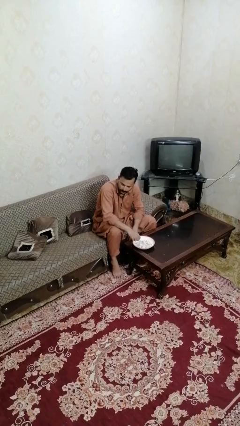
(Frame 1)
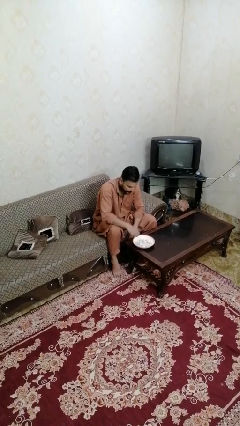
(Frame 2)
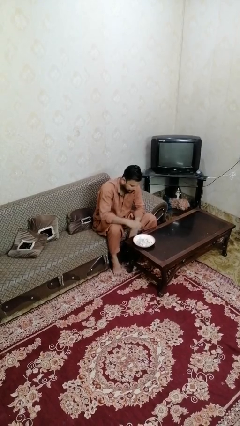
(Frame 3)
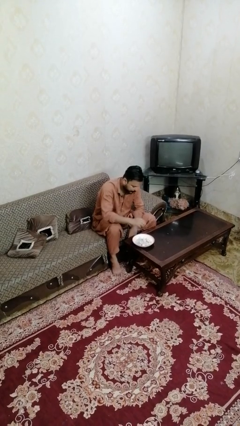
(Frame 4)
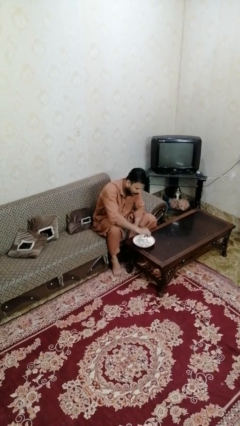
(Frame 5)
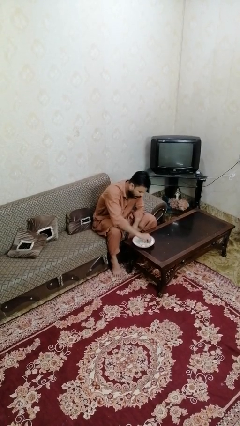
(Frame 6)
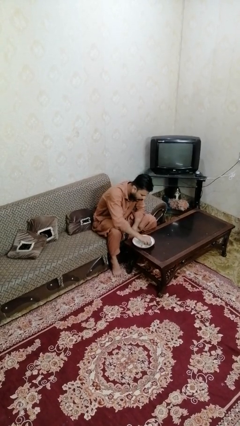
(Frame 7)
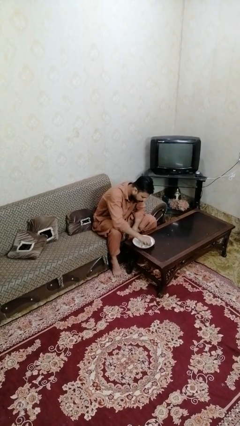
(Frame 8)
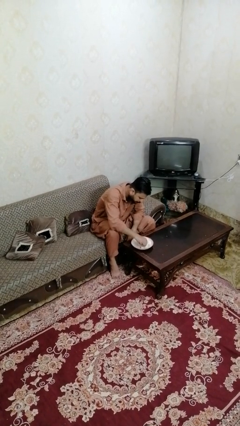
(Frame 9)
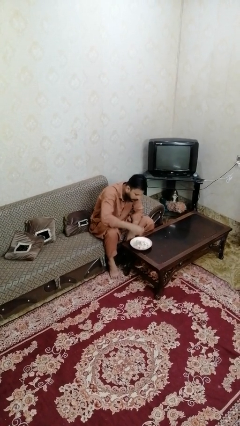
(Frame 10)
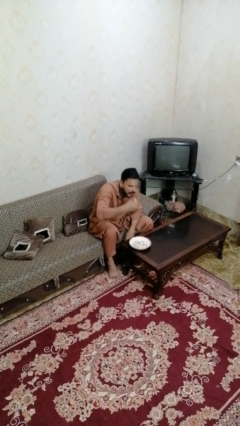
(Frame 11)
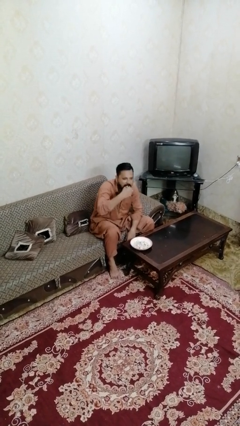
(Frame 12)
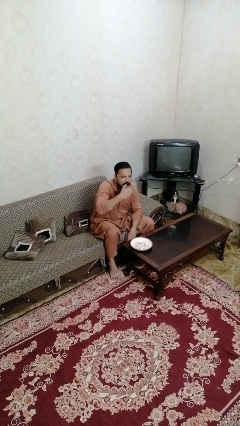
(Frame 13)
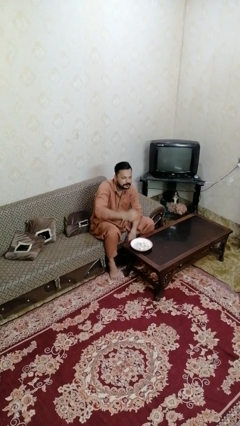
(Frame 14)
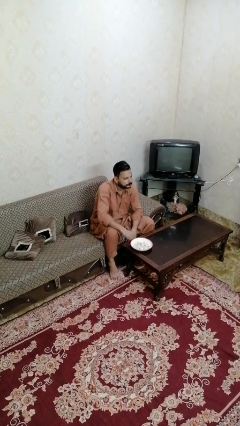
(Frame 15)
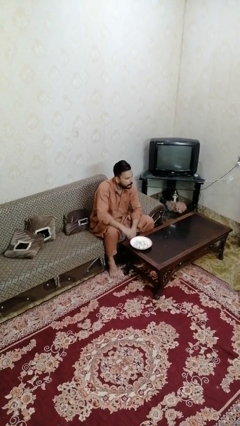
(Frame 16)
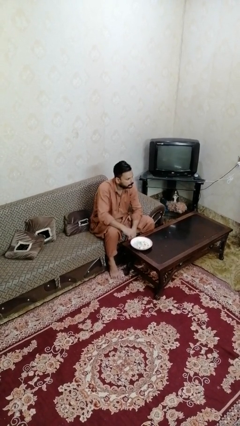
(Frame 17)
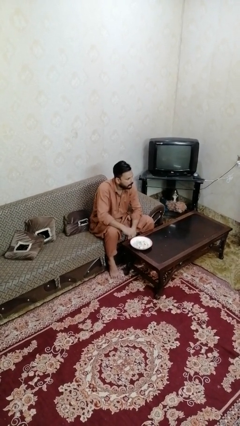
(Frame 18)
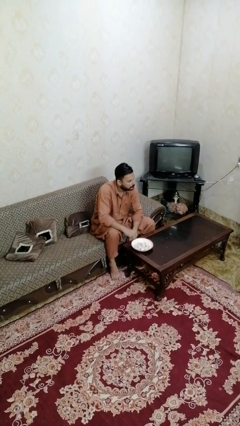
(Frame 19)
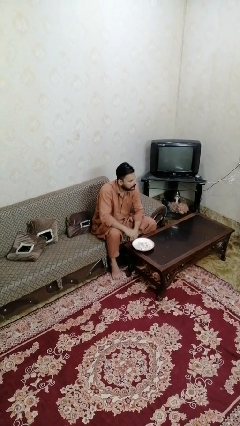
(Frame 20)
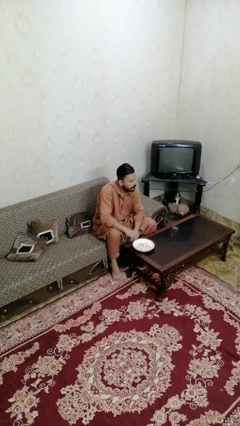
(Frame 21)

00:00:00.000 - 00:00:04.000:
person eats with hands

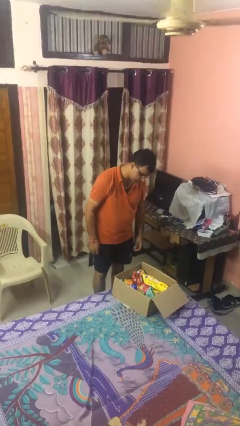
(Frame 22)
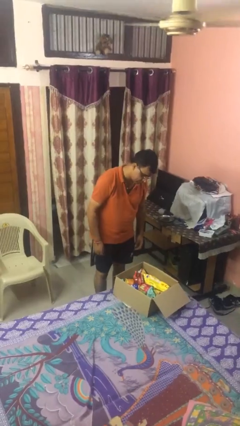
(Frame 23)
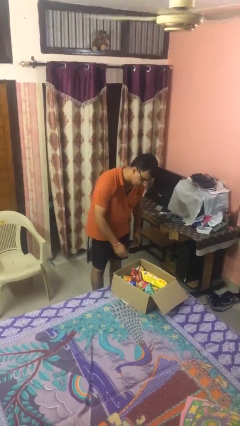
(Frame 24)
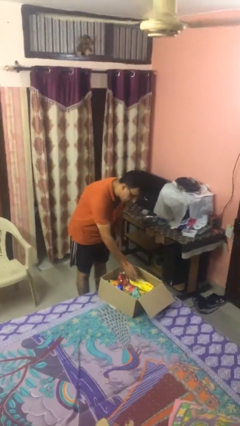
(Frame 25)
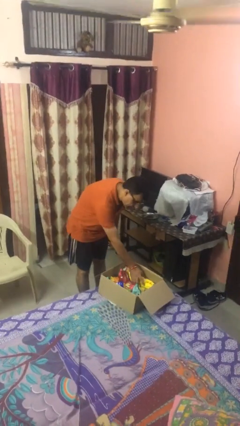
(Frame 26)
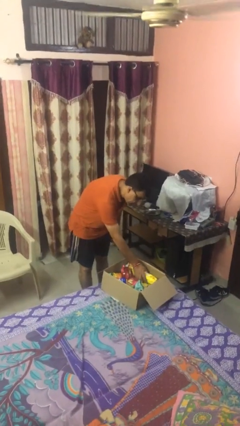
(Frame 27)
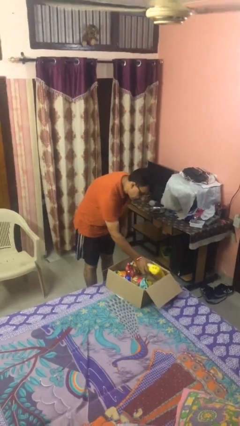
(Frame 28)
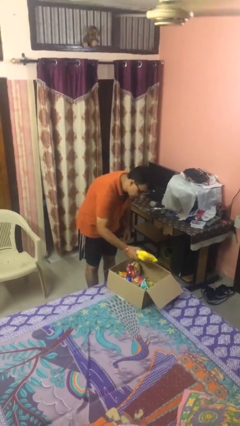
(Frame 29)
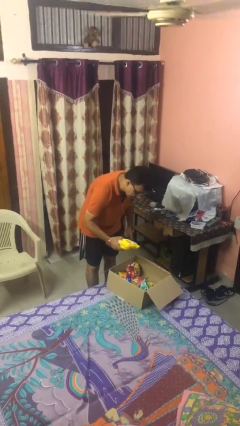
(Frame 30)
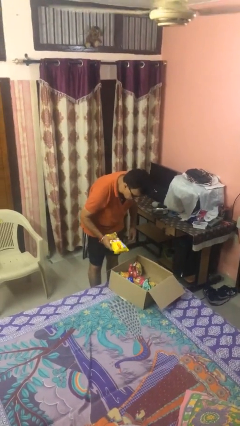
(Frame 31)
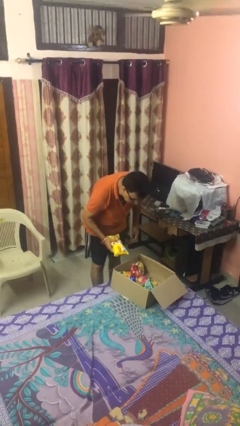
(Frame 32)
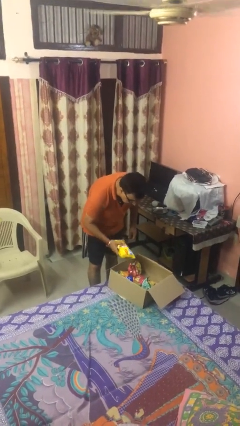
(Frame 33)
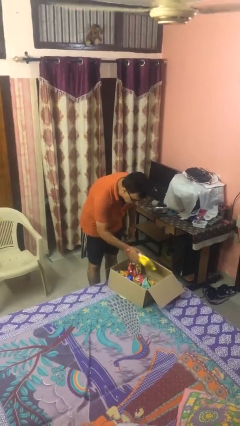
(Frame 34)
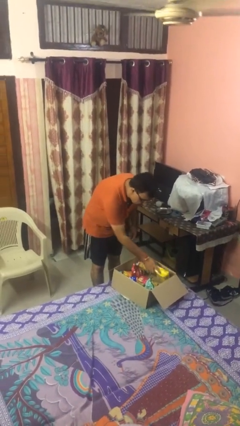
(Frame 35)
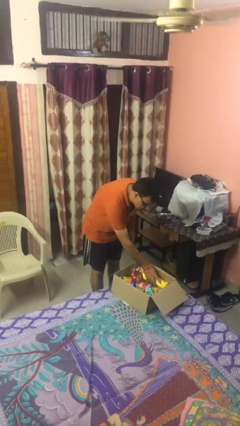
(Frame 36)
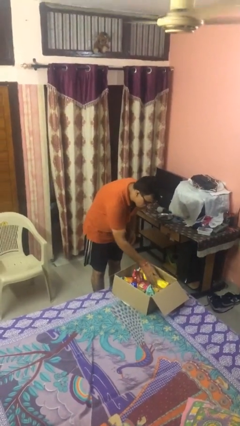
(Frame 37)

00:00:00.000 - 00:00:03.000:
person searches in box

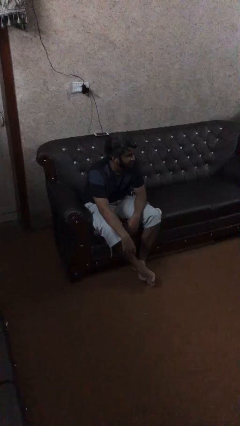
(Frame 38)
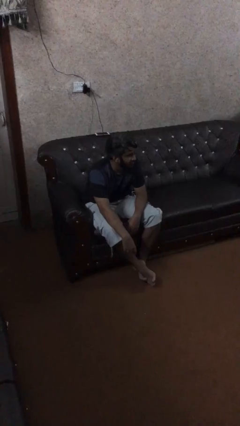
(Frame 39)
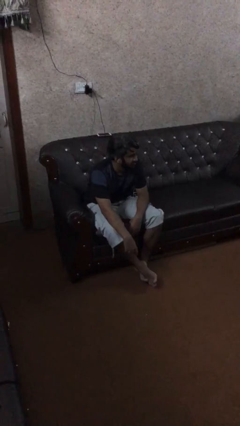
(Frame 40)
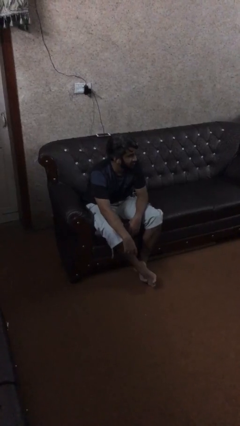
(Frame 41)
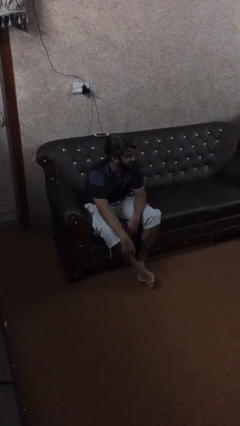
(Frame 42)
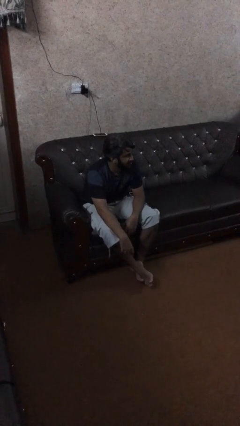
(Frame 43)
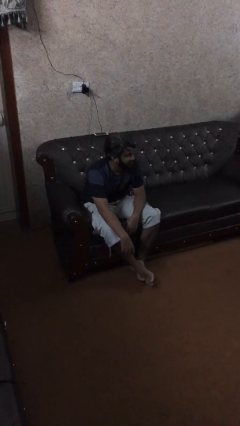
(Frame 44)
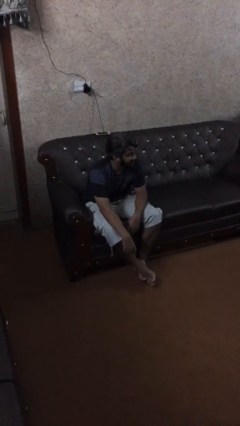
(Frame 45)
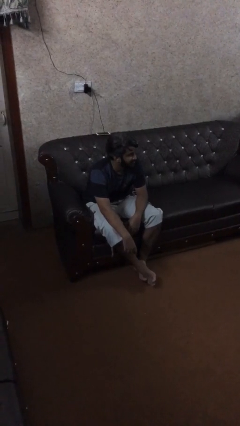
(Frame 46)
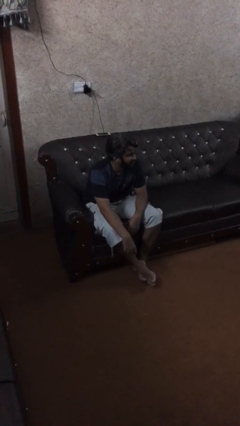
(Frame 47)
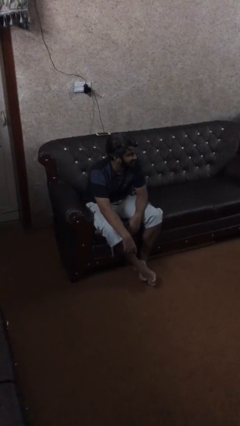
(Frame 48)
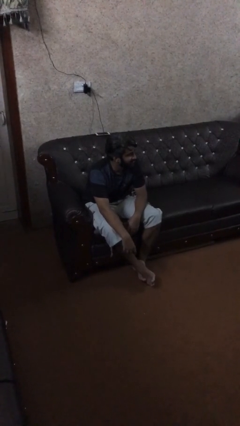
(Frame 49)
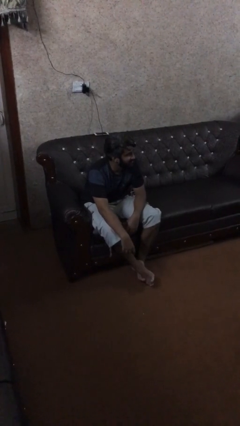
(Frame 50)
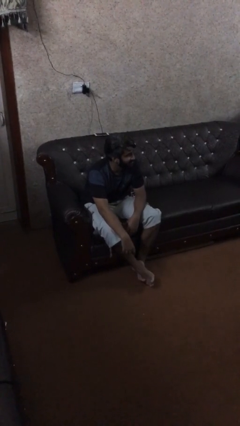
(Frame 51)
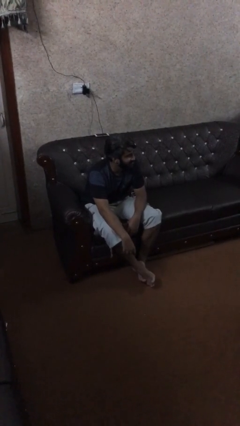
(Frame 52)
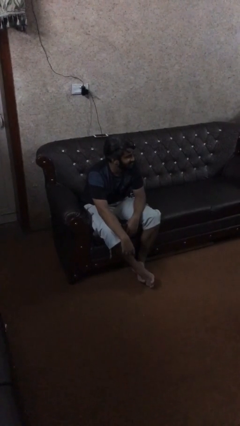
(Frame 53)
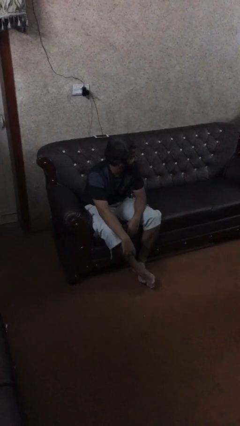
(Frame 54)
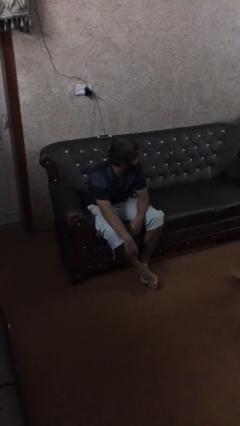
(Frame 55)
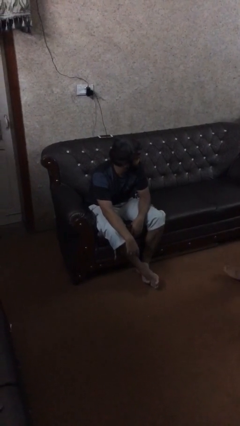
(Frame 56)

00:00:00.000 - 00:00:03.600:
person shakes hand

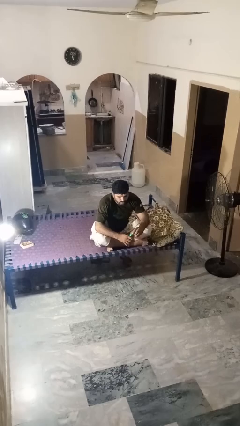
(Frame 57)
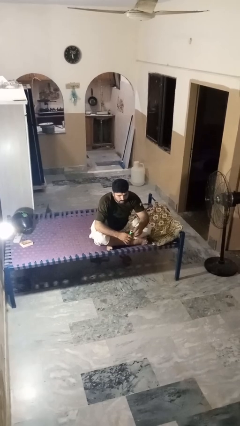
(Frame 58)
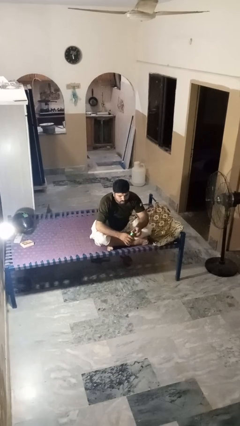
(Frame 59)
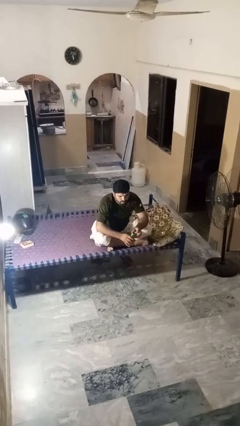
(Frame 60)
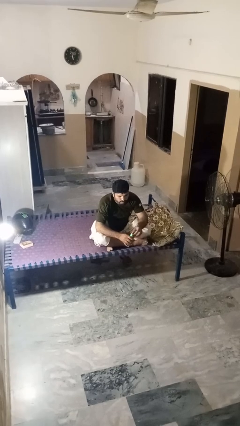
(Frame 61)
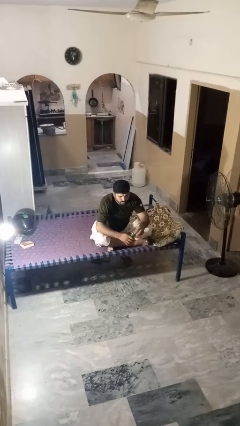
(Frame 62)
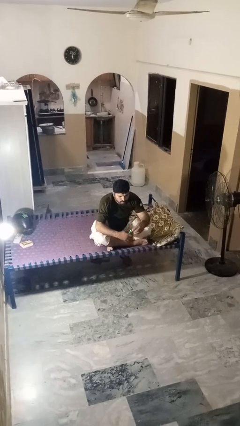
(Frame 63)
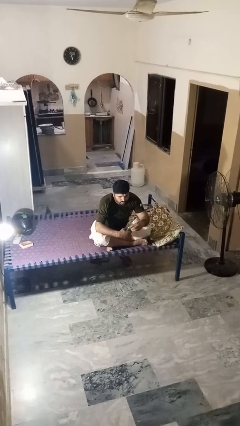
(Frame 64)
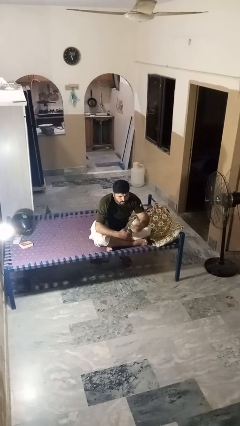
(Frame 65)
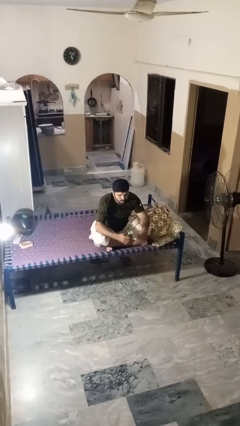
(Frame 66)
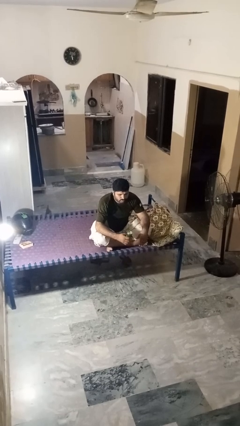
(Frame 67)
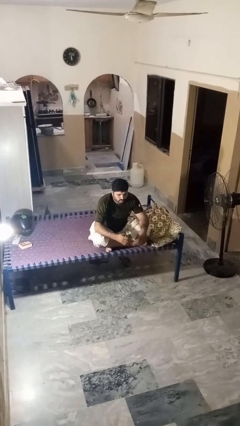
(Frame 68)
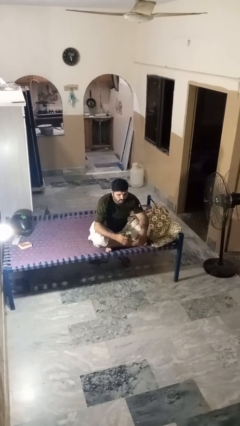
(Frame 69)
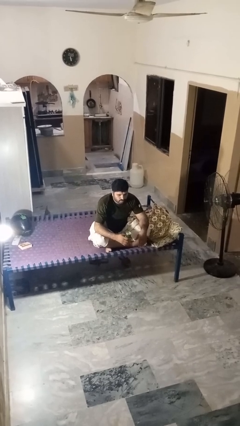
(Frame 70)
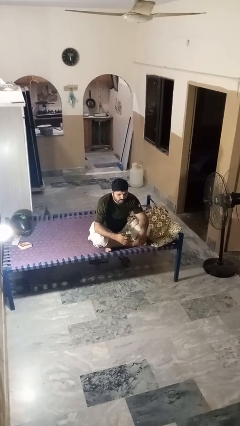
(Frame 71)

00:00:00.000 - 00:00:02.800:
person opens beverage can

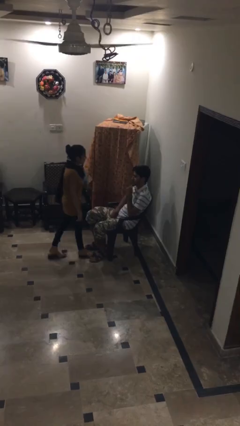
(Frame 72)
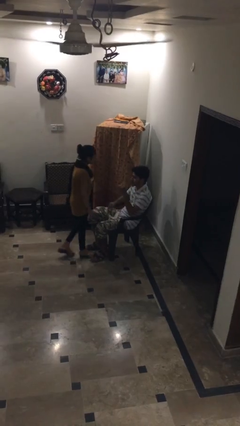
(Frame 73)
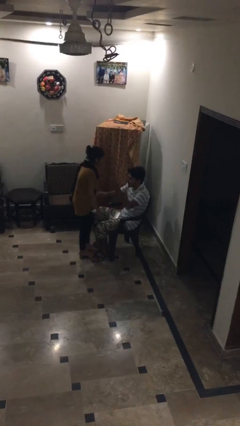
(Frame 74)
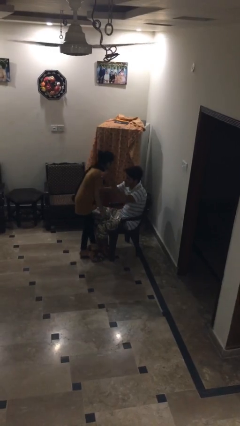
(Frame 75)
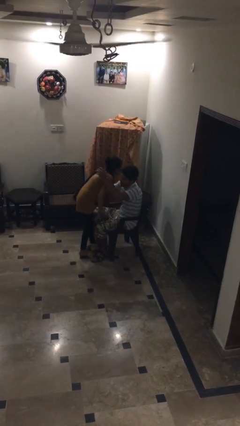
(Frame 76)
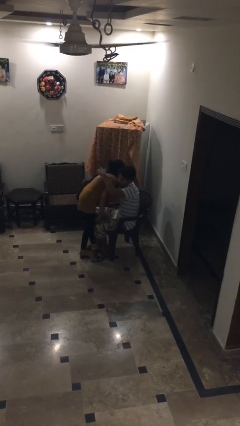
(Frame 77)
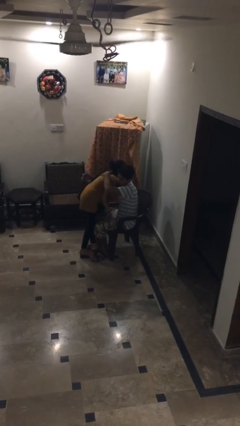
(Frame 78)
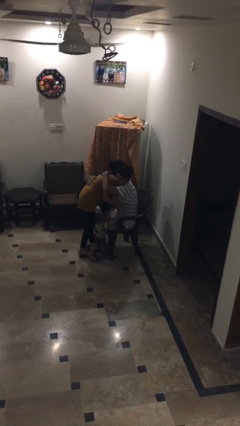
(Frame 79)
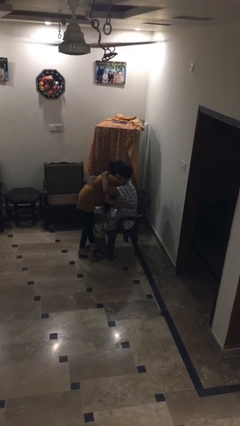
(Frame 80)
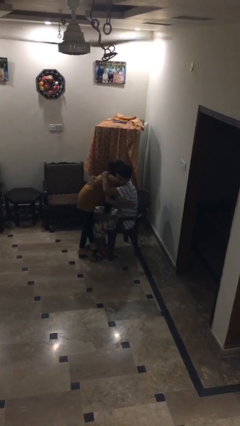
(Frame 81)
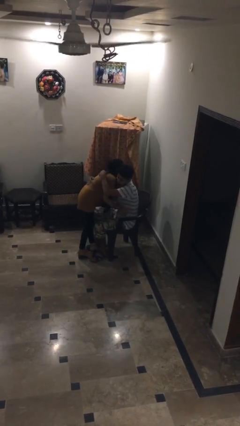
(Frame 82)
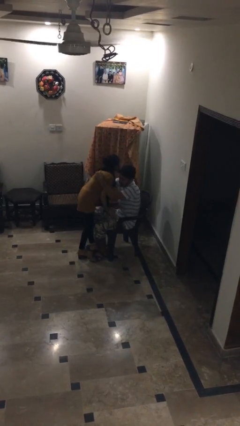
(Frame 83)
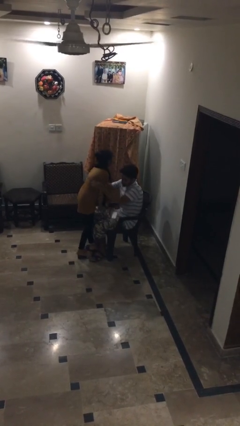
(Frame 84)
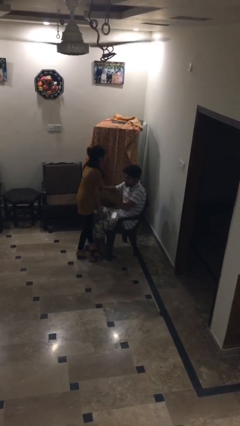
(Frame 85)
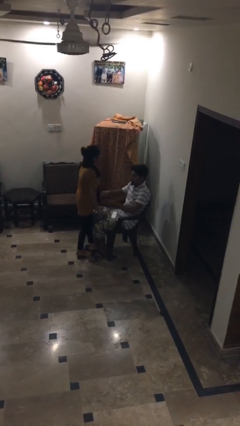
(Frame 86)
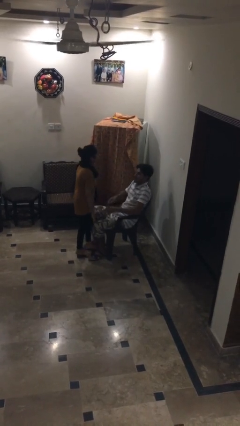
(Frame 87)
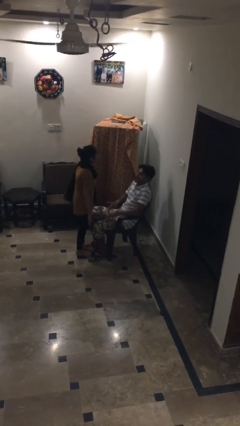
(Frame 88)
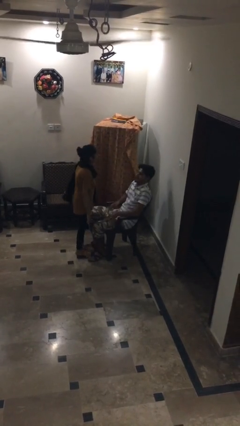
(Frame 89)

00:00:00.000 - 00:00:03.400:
person embraces person

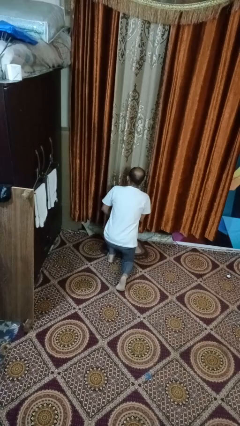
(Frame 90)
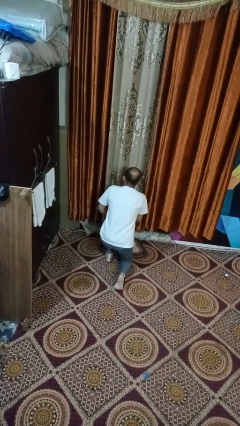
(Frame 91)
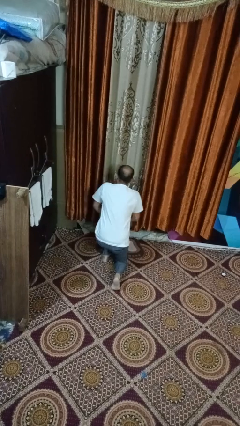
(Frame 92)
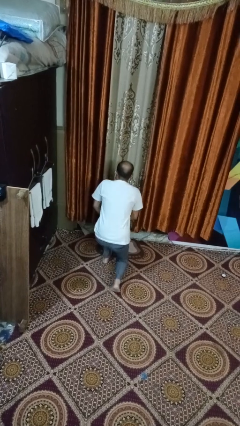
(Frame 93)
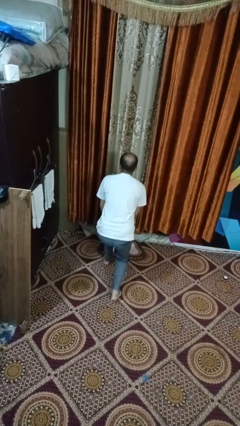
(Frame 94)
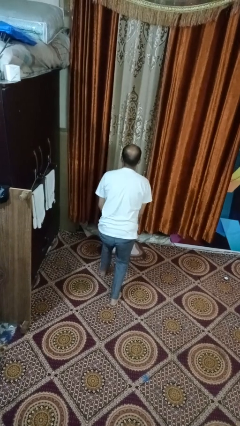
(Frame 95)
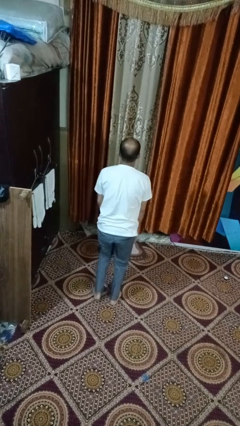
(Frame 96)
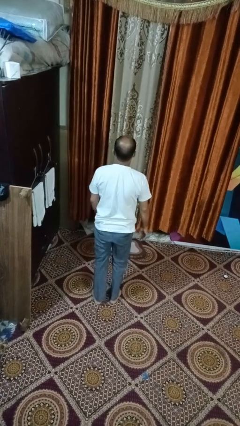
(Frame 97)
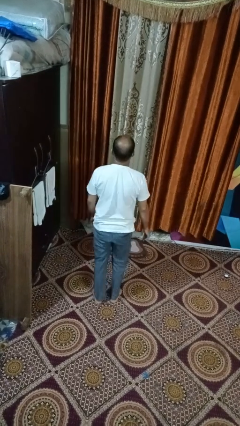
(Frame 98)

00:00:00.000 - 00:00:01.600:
person stands up from floor
